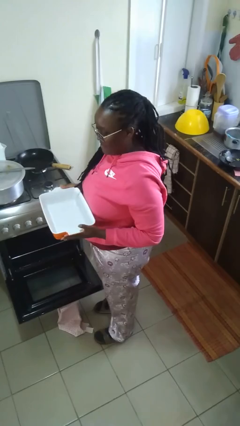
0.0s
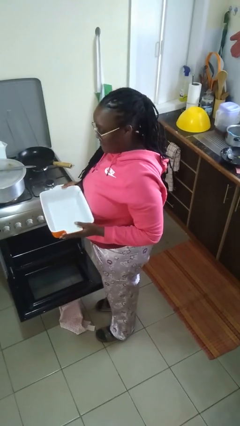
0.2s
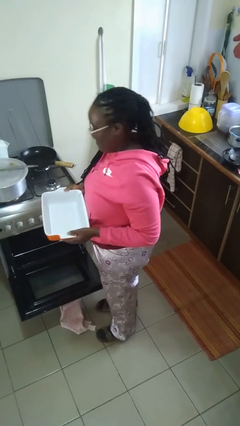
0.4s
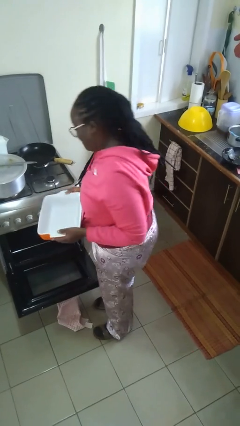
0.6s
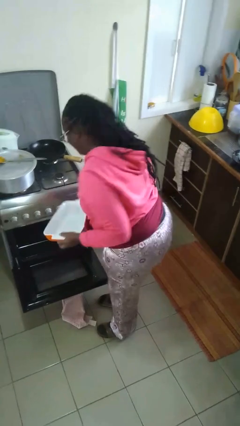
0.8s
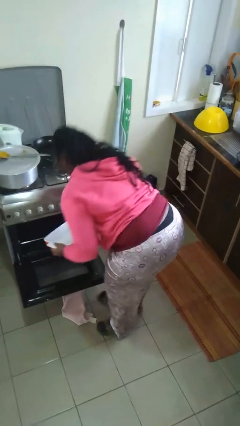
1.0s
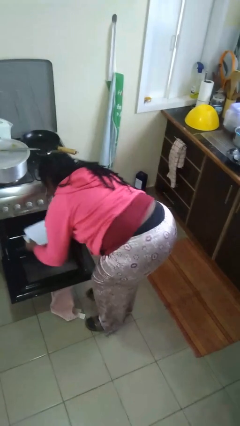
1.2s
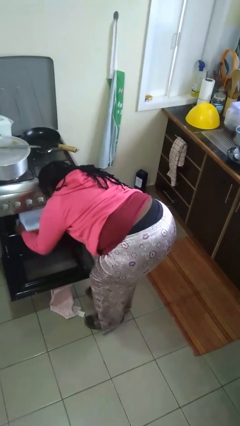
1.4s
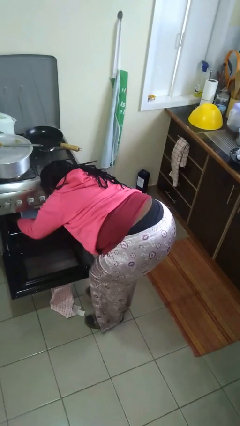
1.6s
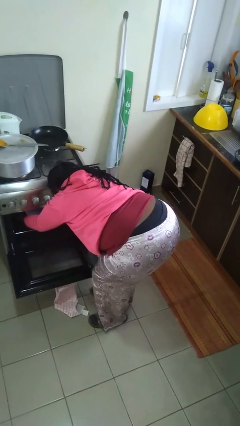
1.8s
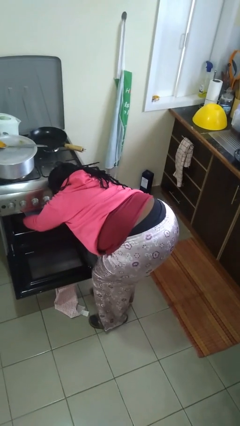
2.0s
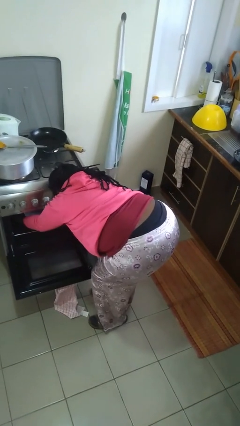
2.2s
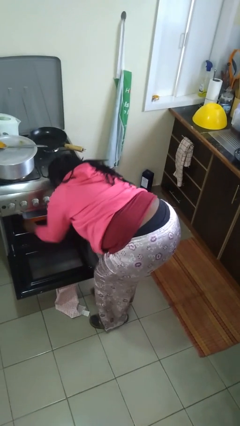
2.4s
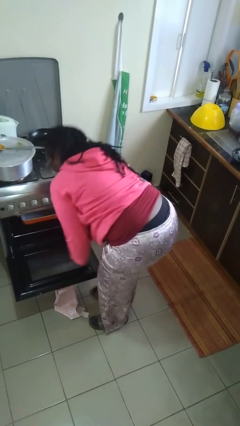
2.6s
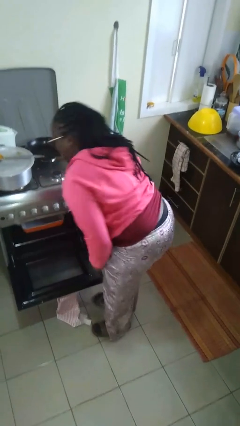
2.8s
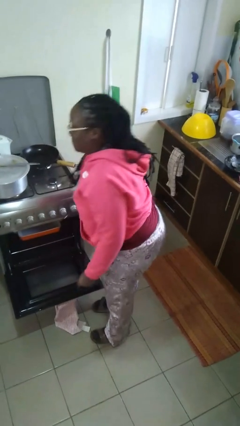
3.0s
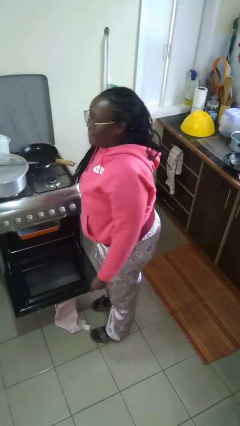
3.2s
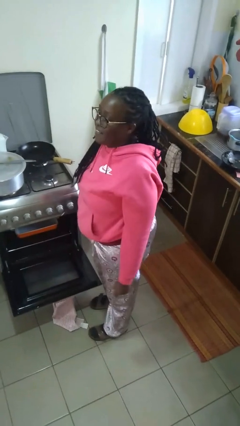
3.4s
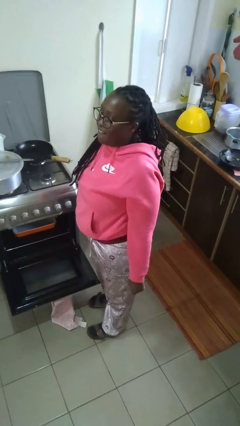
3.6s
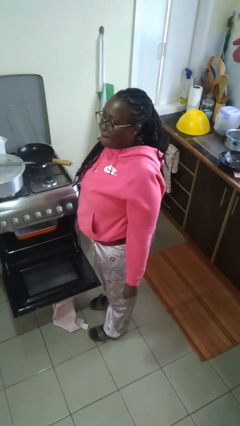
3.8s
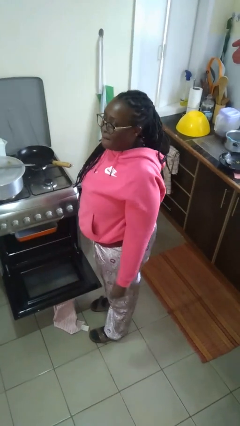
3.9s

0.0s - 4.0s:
person puts object into oven

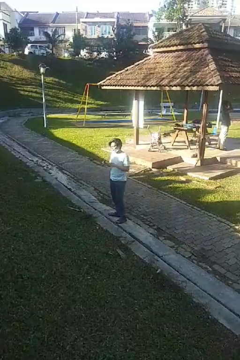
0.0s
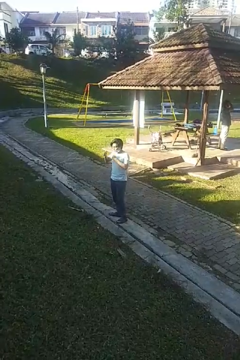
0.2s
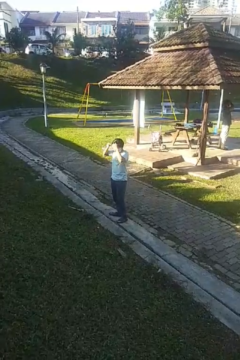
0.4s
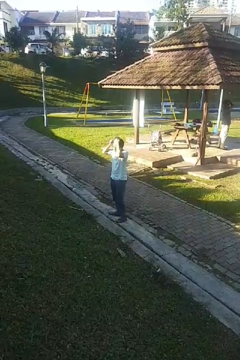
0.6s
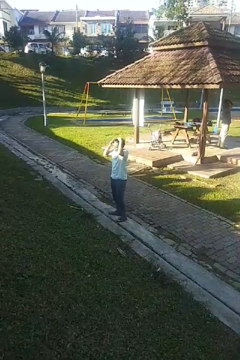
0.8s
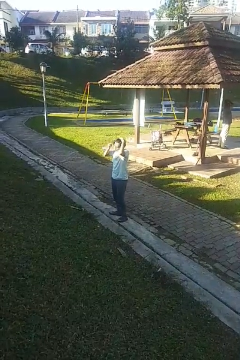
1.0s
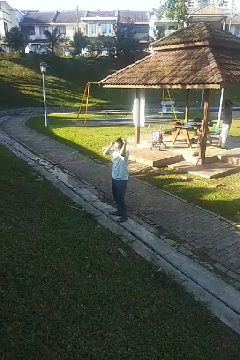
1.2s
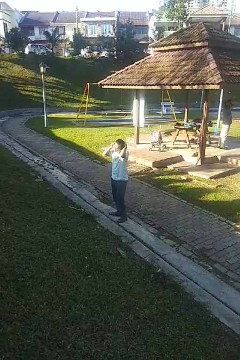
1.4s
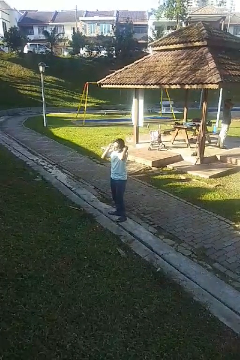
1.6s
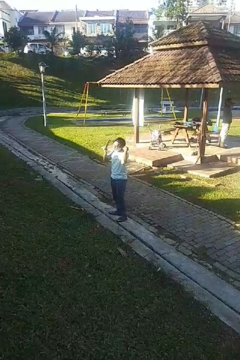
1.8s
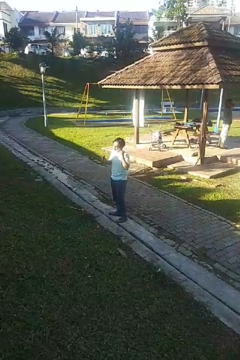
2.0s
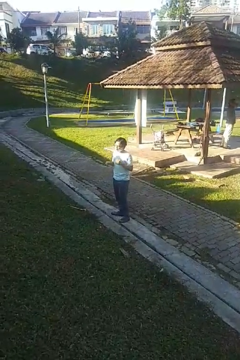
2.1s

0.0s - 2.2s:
person brushes hair

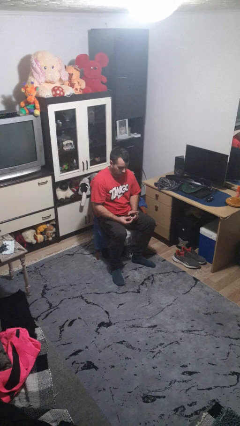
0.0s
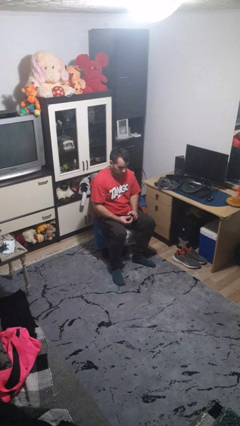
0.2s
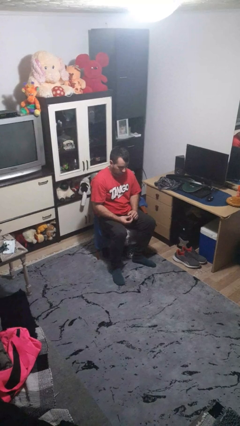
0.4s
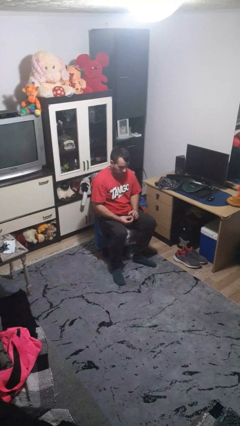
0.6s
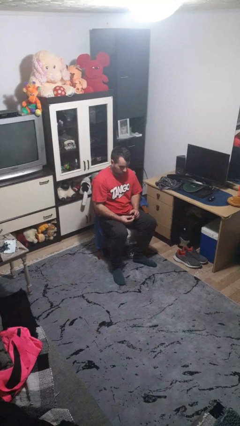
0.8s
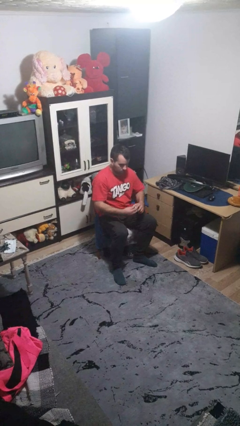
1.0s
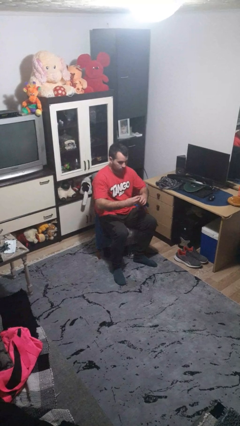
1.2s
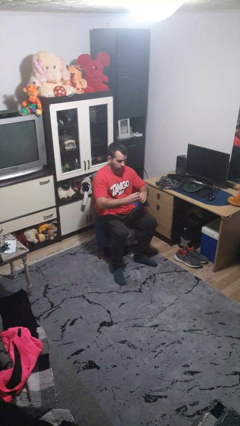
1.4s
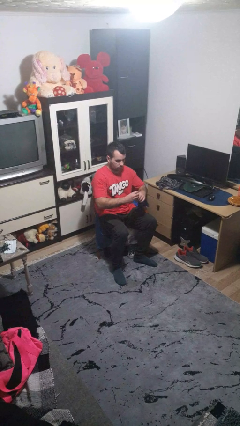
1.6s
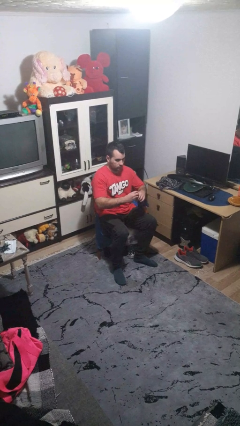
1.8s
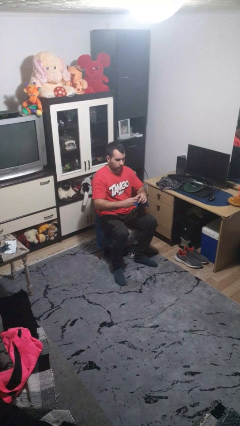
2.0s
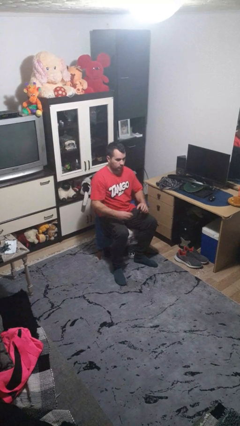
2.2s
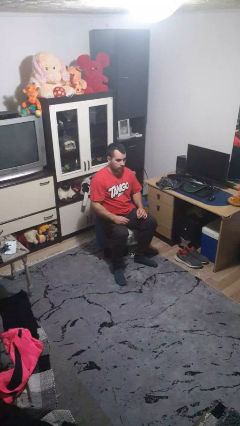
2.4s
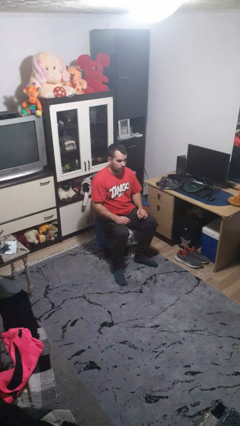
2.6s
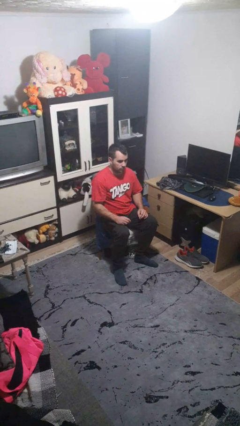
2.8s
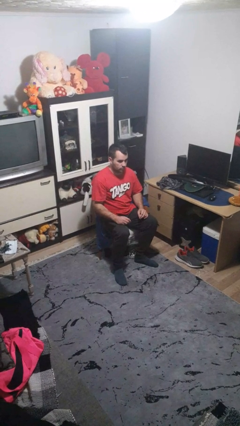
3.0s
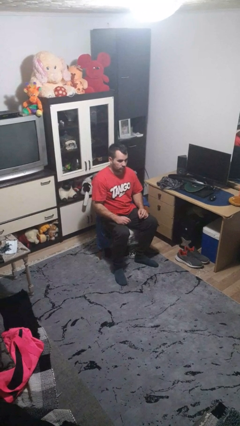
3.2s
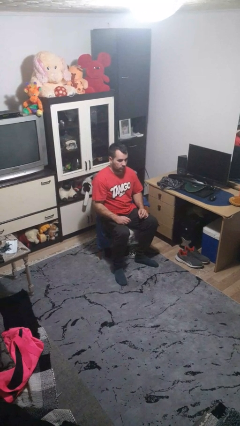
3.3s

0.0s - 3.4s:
person puts on ring

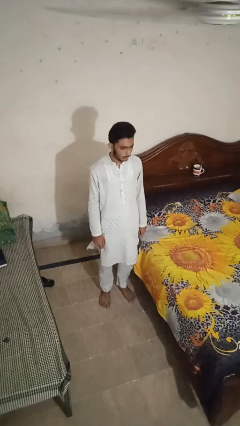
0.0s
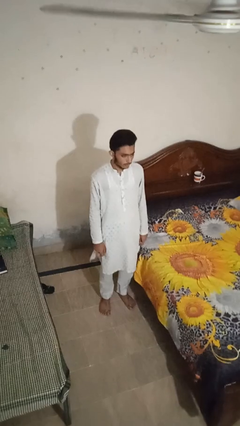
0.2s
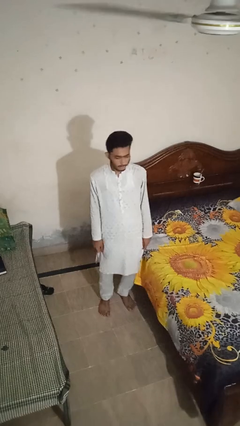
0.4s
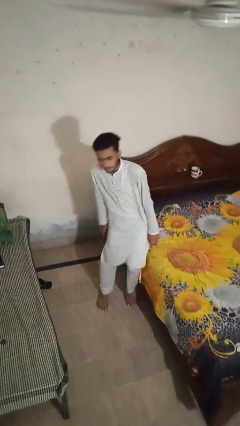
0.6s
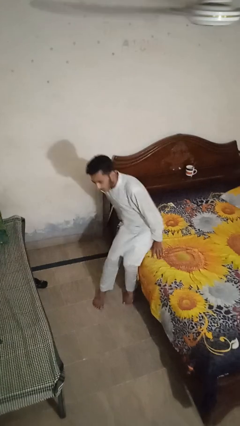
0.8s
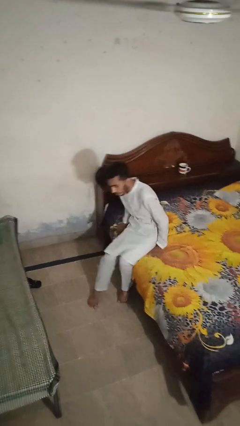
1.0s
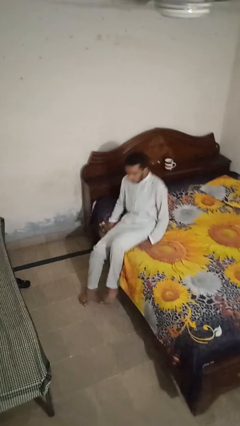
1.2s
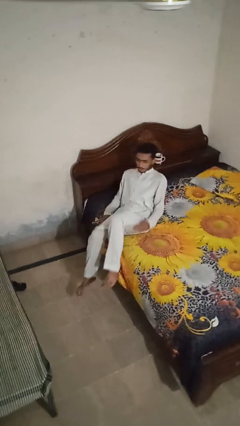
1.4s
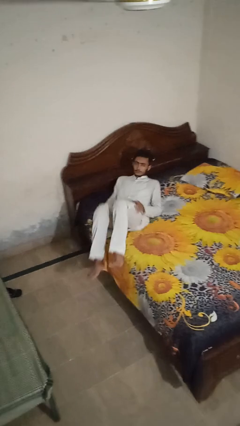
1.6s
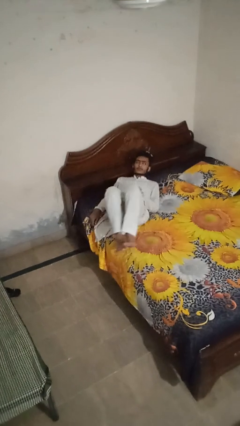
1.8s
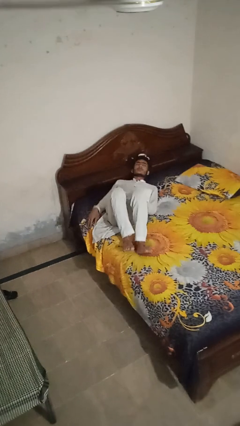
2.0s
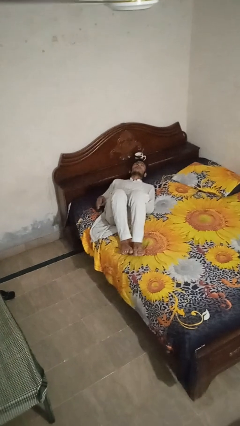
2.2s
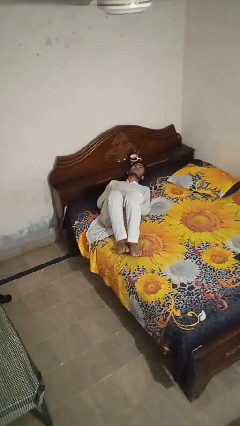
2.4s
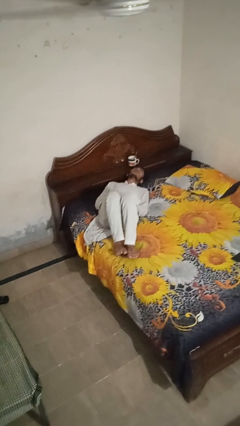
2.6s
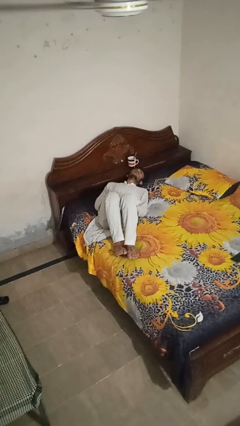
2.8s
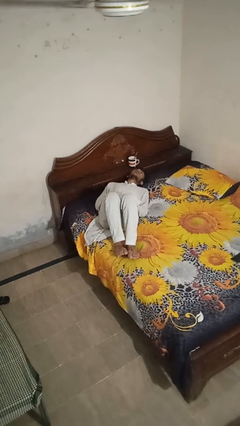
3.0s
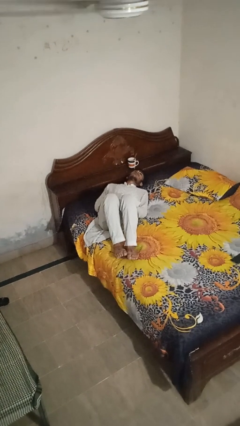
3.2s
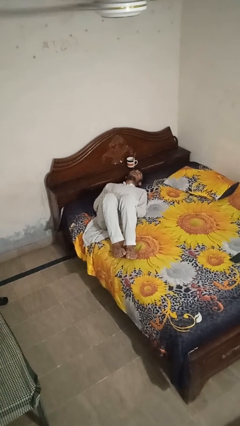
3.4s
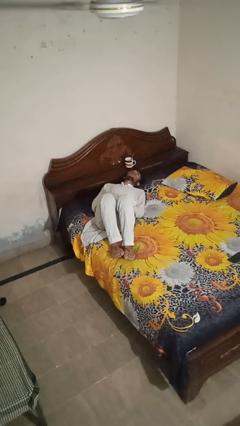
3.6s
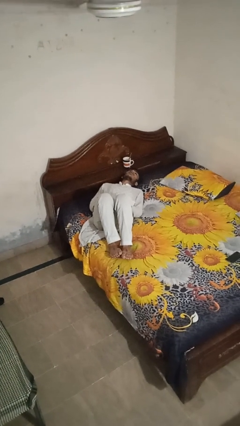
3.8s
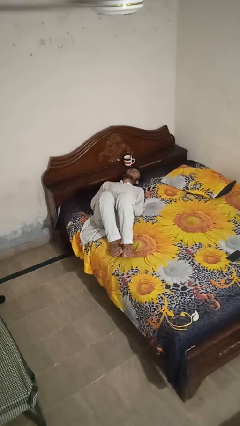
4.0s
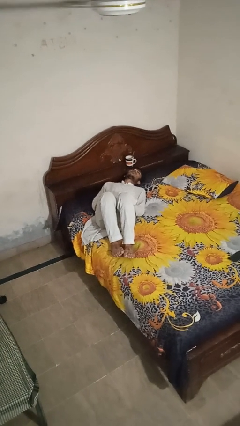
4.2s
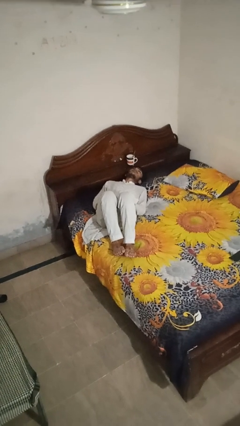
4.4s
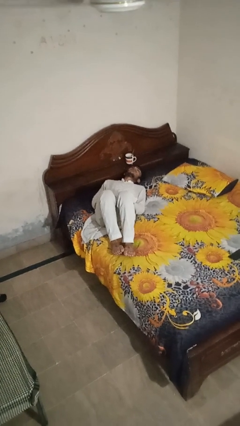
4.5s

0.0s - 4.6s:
person lies down on bed

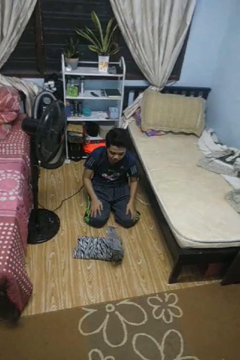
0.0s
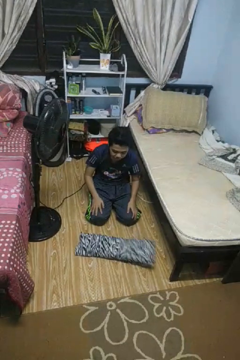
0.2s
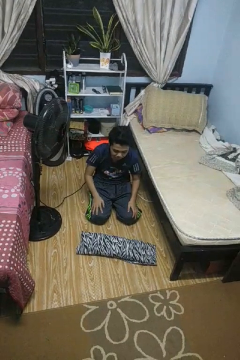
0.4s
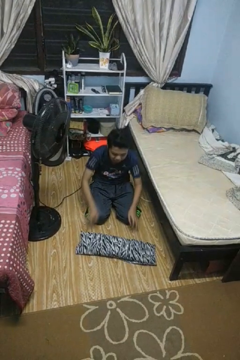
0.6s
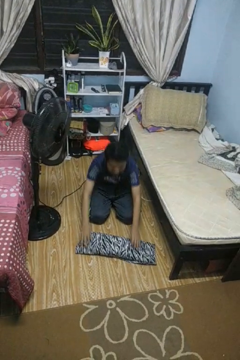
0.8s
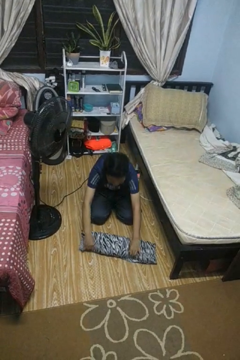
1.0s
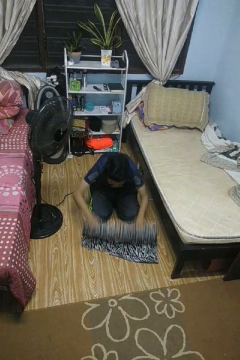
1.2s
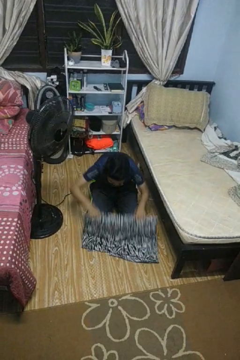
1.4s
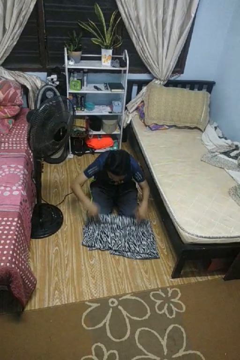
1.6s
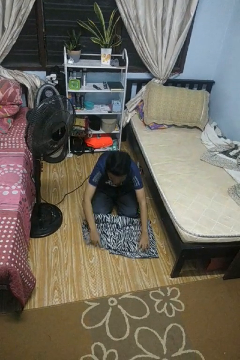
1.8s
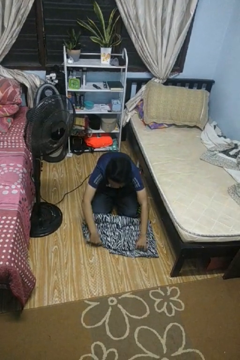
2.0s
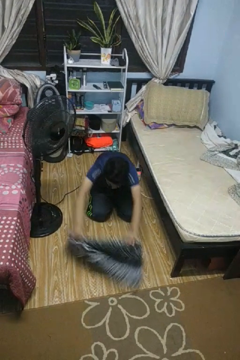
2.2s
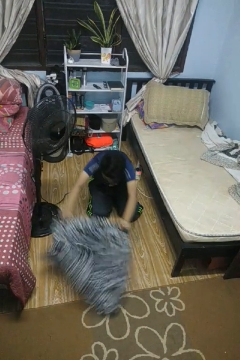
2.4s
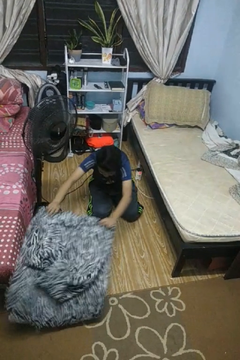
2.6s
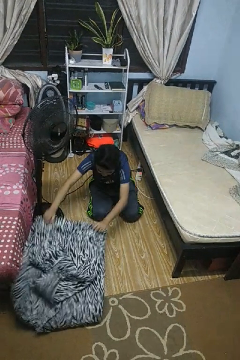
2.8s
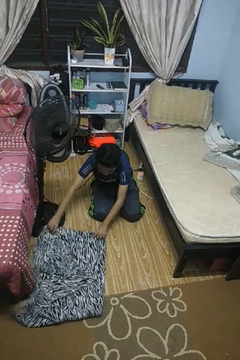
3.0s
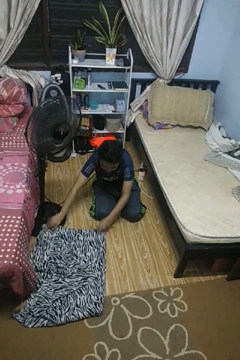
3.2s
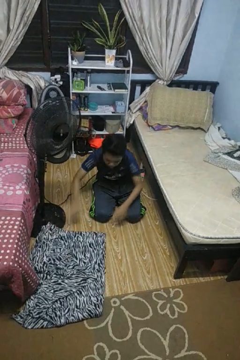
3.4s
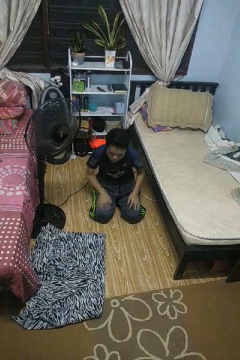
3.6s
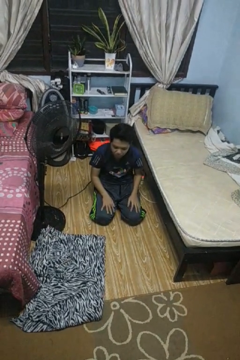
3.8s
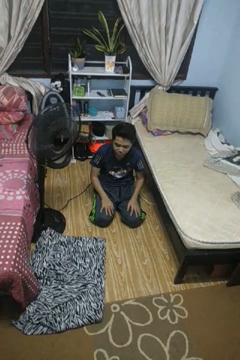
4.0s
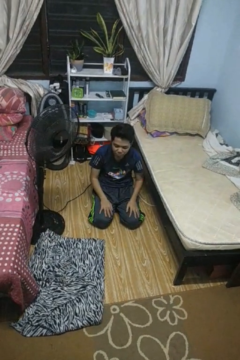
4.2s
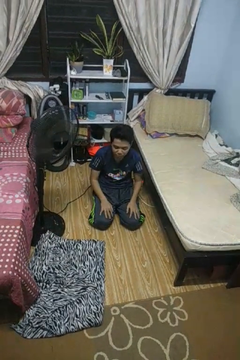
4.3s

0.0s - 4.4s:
person unfolds blanket
